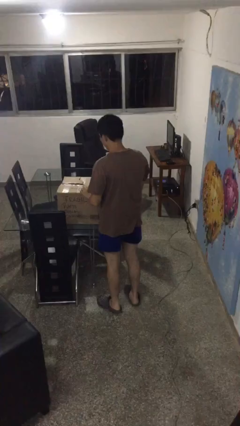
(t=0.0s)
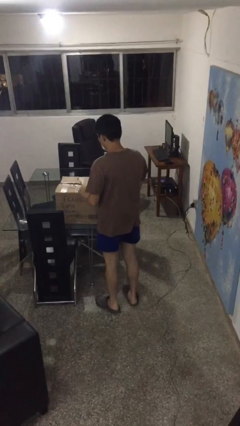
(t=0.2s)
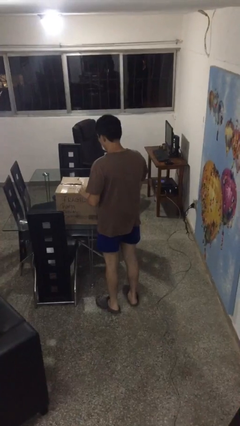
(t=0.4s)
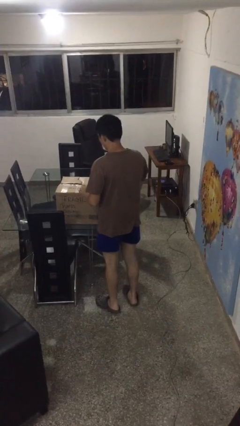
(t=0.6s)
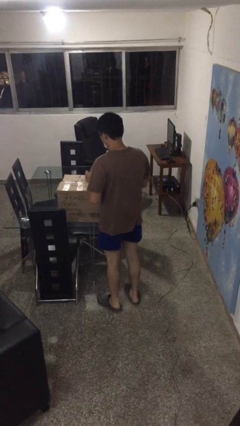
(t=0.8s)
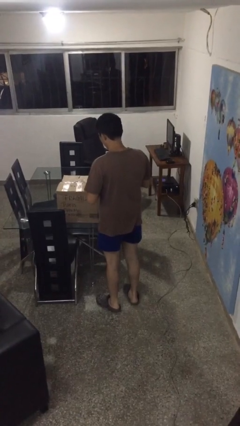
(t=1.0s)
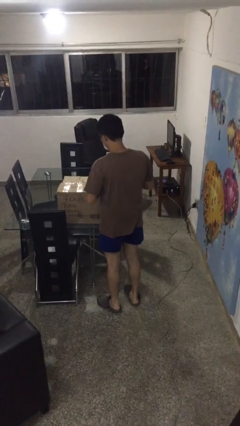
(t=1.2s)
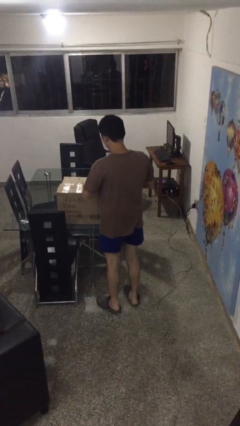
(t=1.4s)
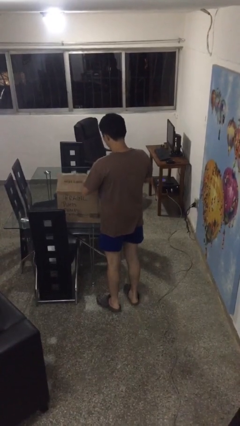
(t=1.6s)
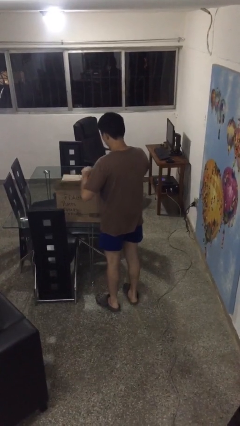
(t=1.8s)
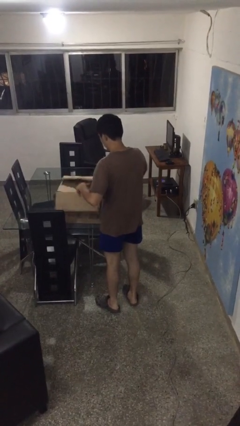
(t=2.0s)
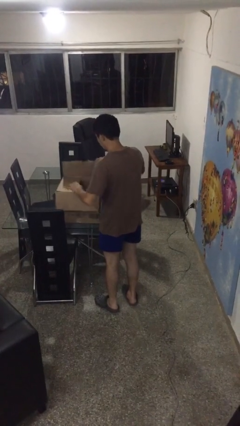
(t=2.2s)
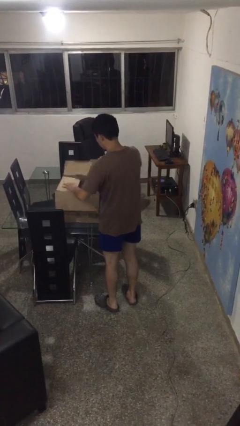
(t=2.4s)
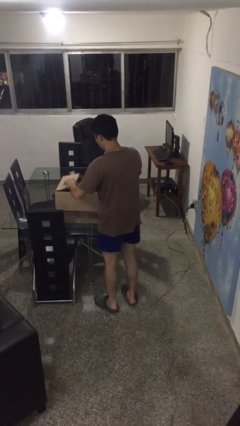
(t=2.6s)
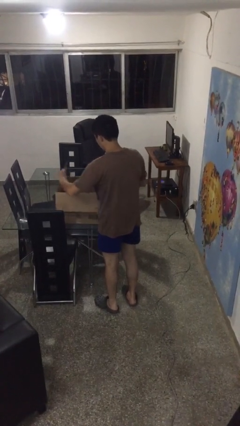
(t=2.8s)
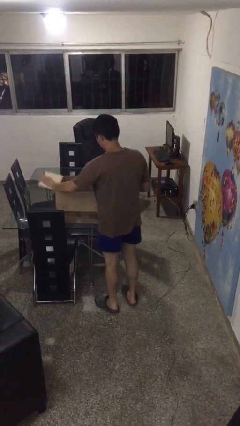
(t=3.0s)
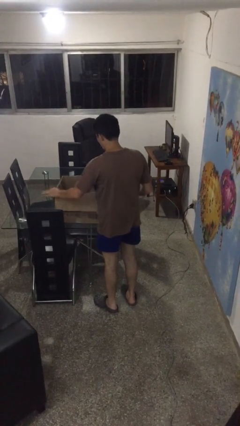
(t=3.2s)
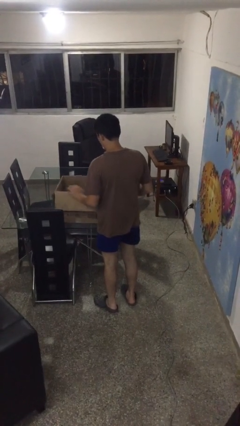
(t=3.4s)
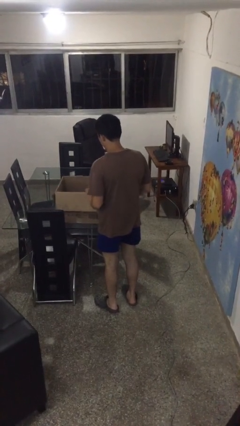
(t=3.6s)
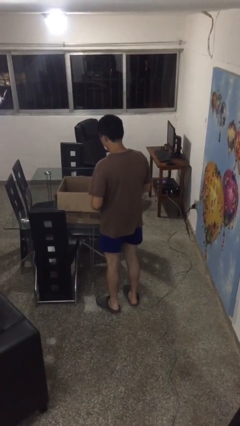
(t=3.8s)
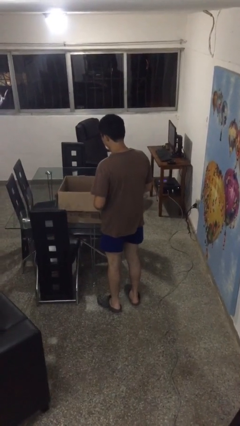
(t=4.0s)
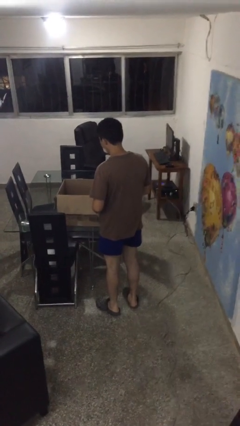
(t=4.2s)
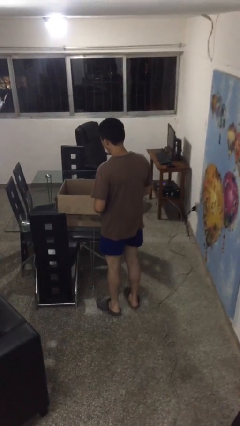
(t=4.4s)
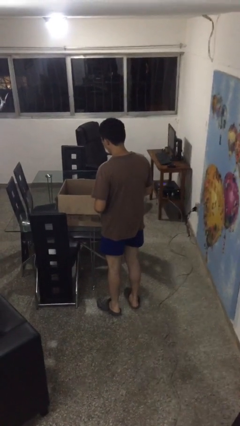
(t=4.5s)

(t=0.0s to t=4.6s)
person opens box

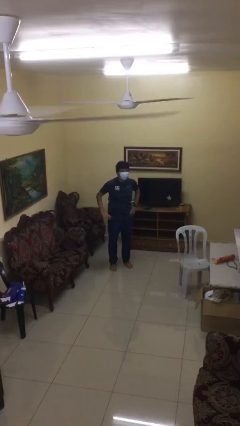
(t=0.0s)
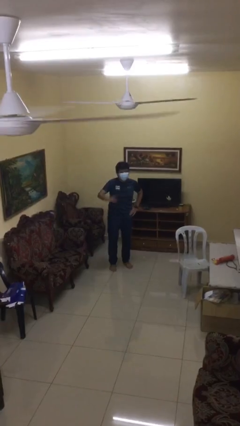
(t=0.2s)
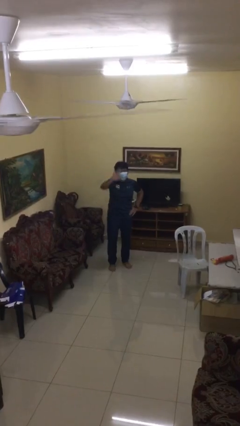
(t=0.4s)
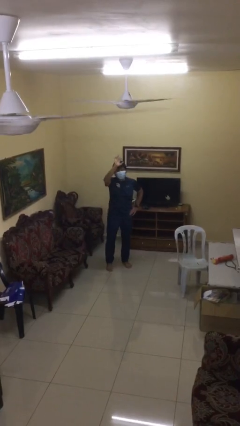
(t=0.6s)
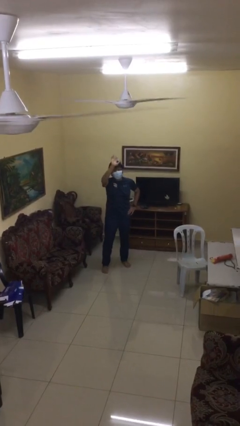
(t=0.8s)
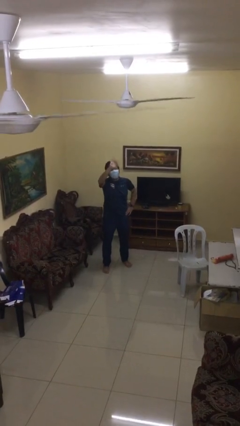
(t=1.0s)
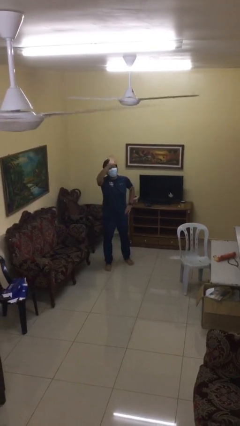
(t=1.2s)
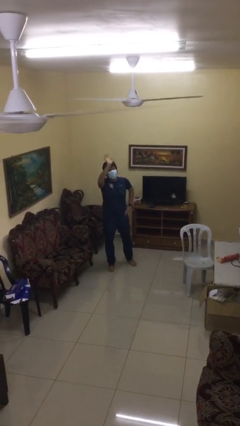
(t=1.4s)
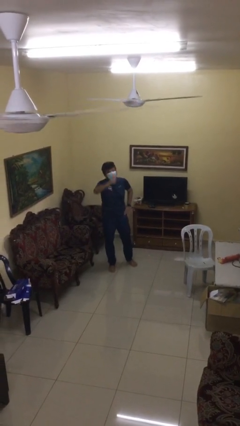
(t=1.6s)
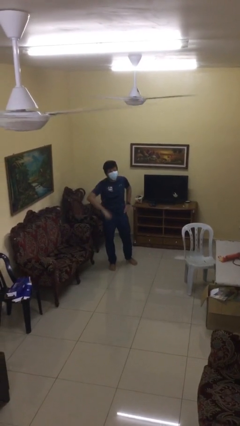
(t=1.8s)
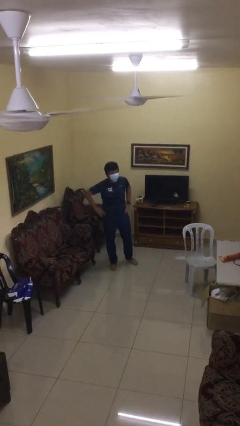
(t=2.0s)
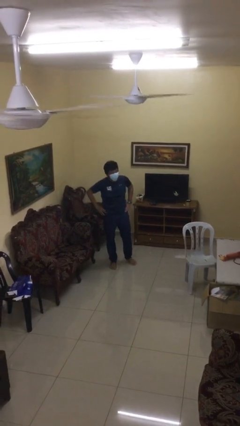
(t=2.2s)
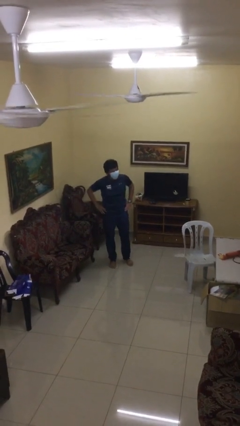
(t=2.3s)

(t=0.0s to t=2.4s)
person waves at person

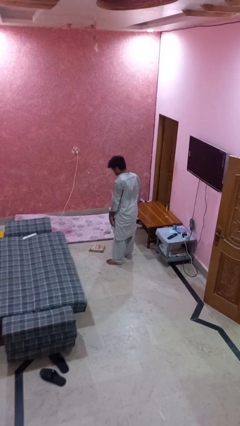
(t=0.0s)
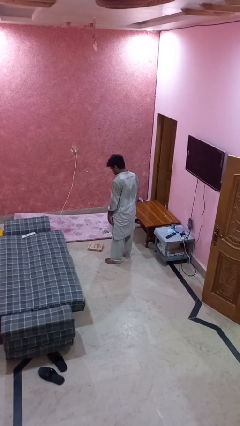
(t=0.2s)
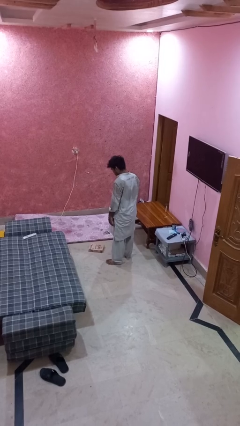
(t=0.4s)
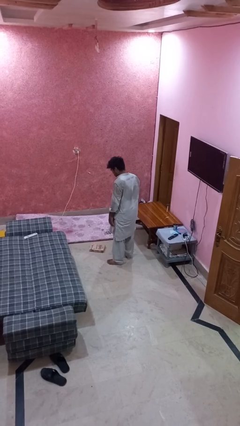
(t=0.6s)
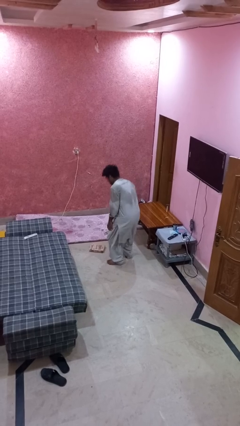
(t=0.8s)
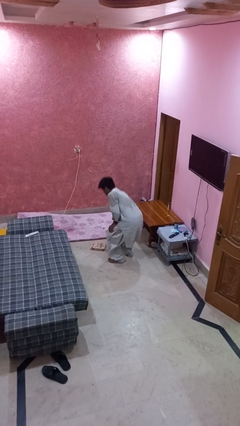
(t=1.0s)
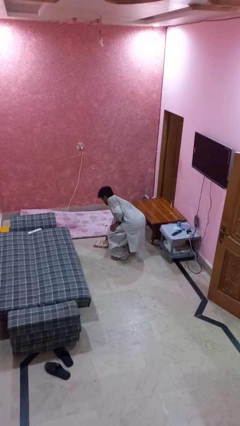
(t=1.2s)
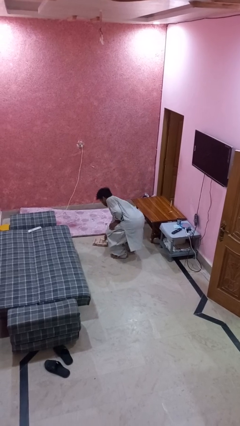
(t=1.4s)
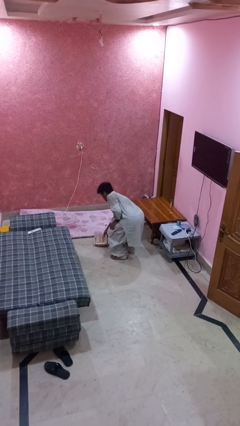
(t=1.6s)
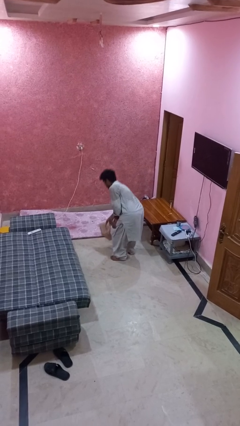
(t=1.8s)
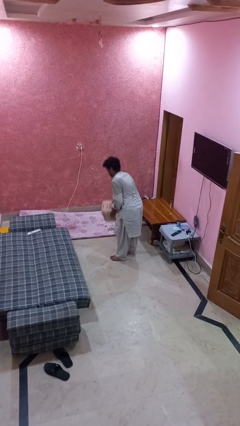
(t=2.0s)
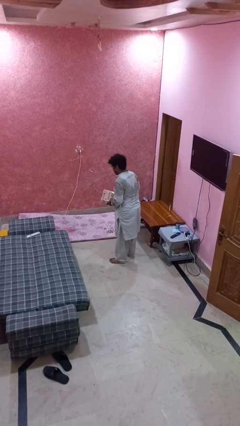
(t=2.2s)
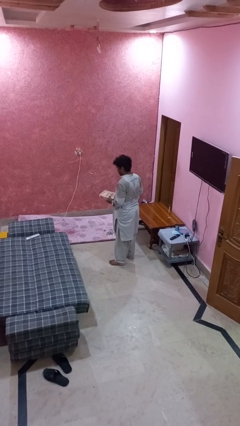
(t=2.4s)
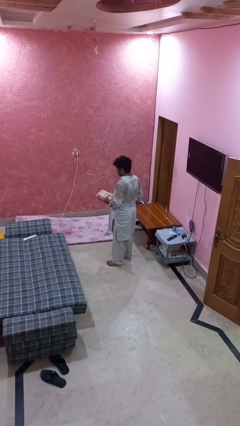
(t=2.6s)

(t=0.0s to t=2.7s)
person picks up object from floor

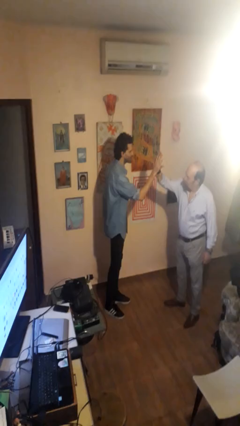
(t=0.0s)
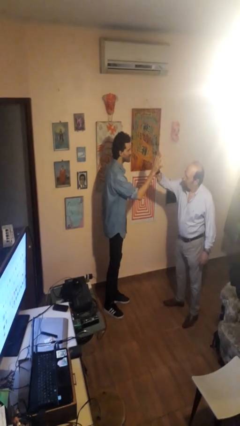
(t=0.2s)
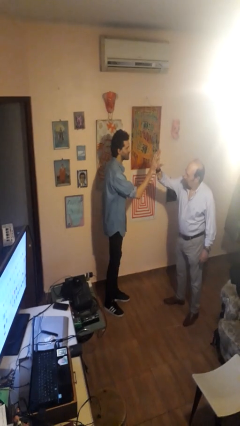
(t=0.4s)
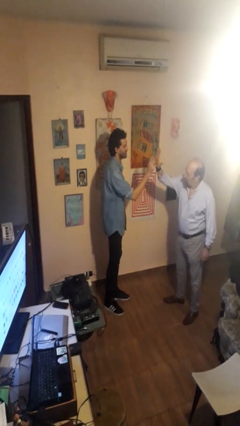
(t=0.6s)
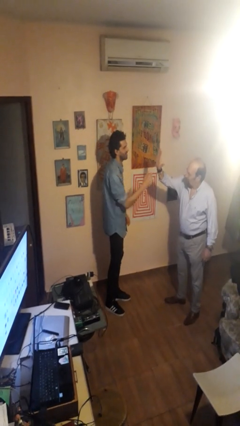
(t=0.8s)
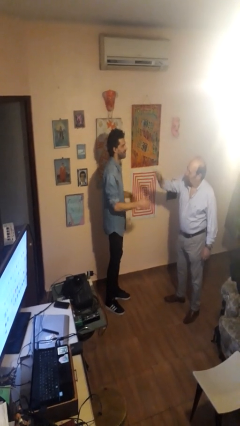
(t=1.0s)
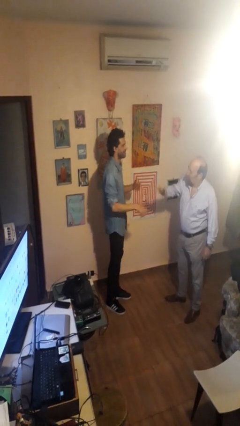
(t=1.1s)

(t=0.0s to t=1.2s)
person highfives hand

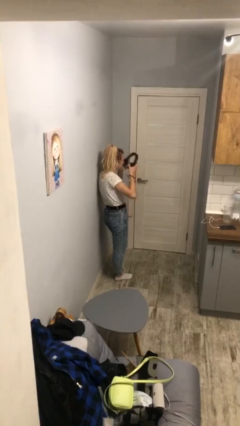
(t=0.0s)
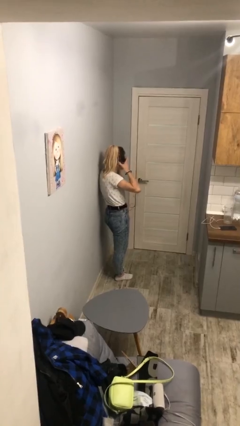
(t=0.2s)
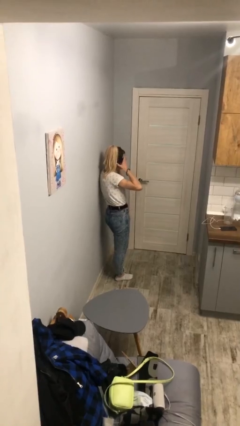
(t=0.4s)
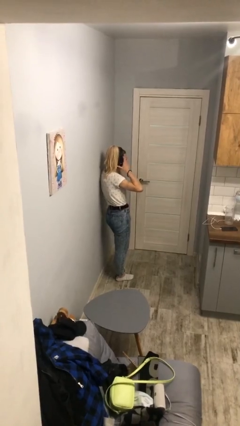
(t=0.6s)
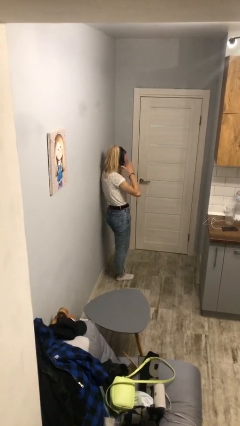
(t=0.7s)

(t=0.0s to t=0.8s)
person puts on headphones

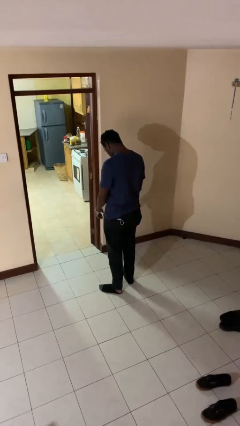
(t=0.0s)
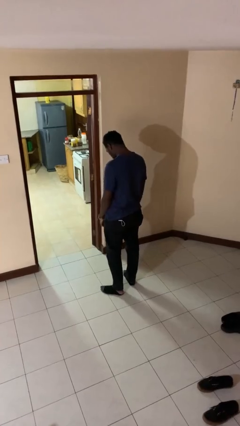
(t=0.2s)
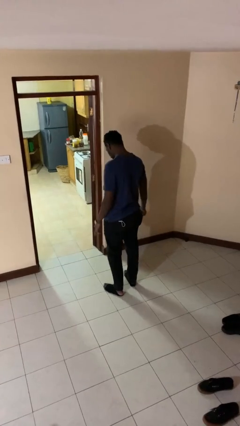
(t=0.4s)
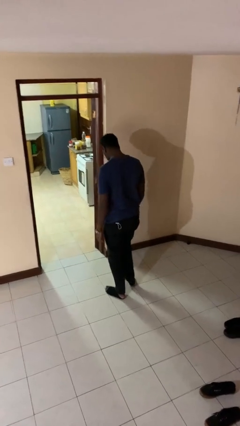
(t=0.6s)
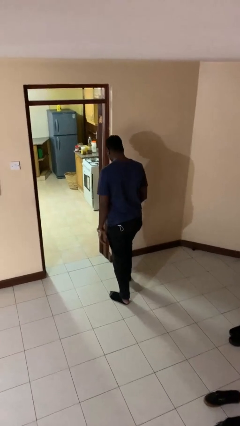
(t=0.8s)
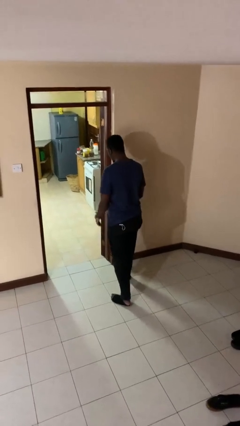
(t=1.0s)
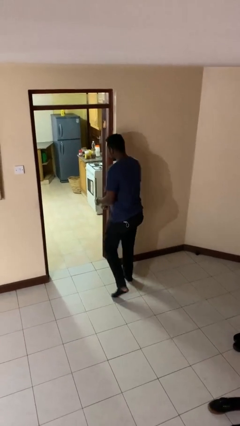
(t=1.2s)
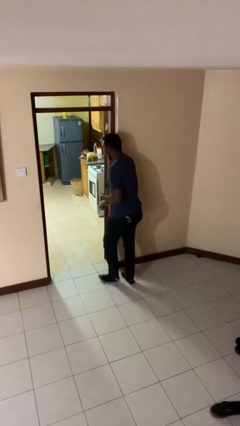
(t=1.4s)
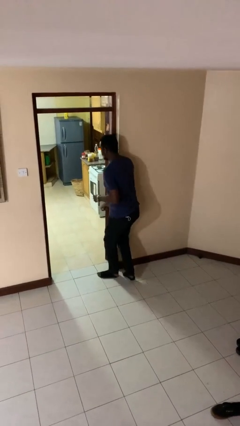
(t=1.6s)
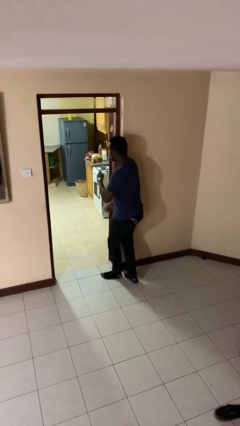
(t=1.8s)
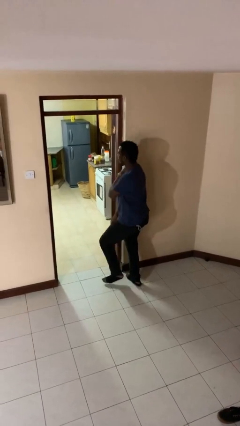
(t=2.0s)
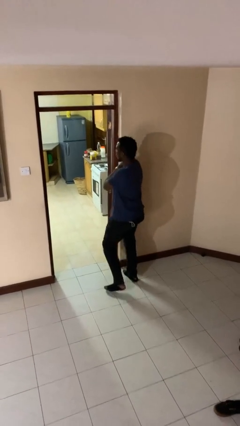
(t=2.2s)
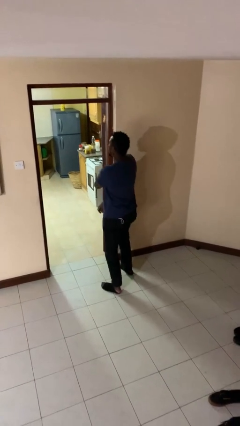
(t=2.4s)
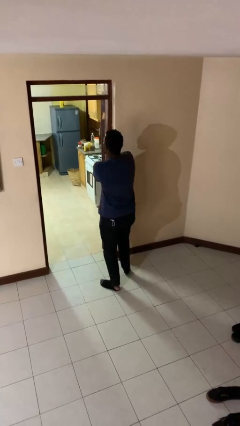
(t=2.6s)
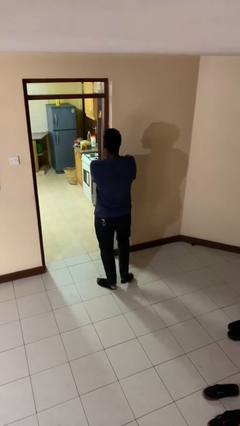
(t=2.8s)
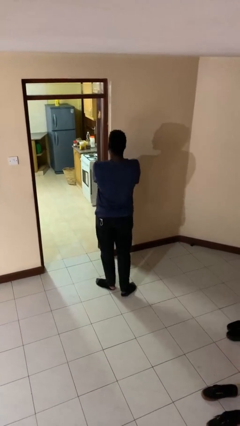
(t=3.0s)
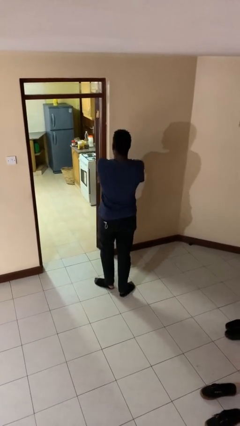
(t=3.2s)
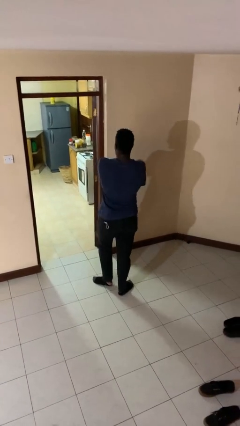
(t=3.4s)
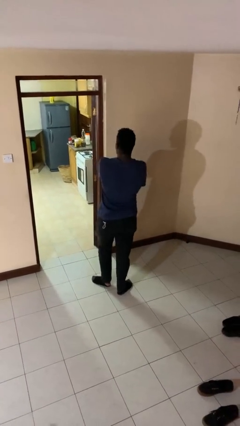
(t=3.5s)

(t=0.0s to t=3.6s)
person bumps into wall

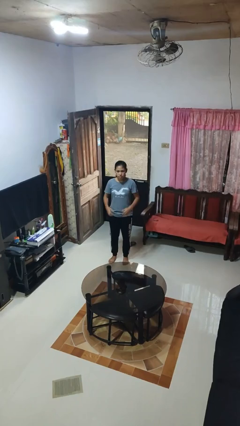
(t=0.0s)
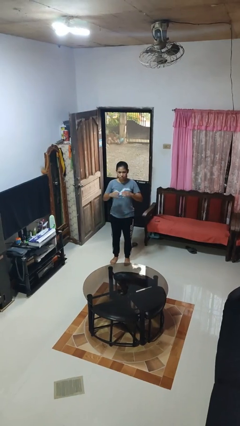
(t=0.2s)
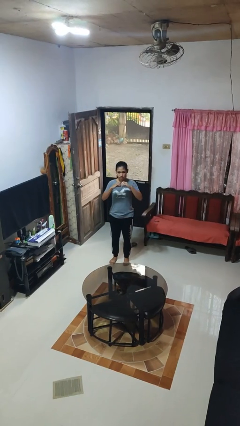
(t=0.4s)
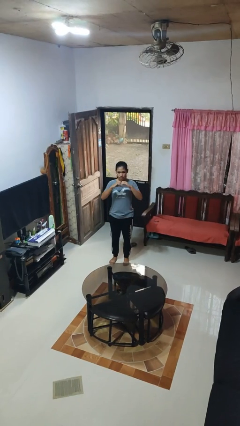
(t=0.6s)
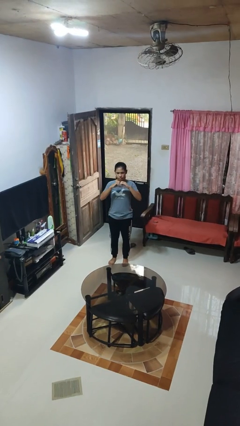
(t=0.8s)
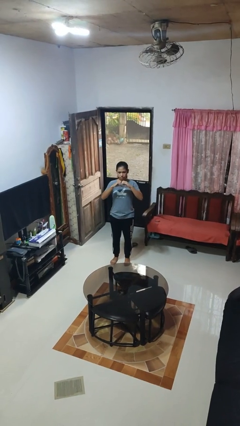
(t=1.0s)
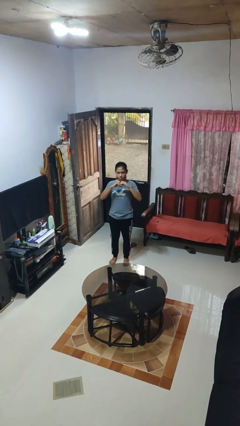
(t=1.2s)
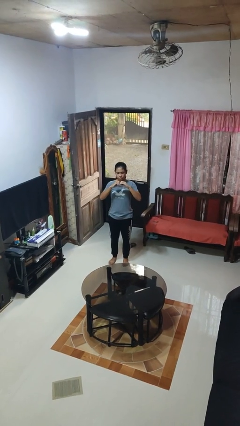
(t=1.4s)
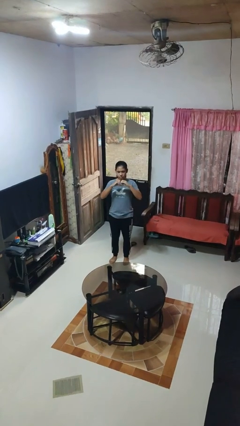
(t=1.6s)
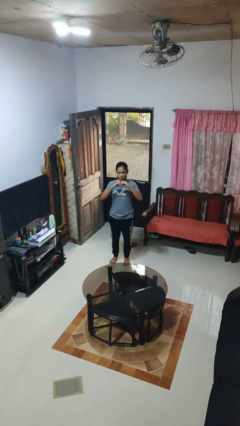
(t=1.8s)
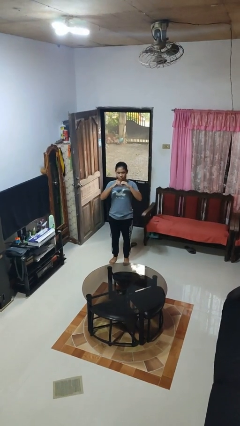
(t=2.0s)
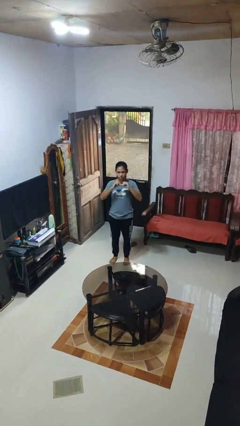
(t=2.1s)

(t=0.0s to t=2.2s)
person gestures heart
